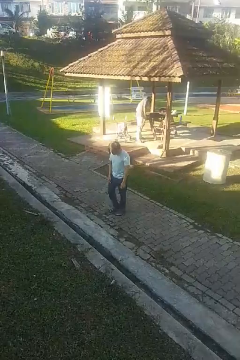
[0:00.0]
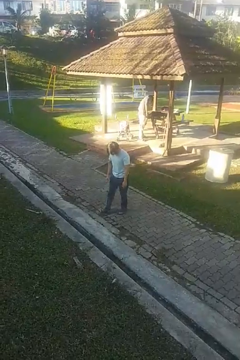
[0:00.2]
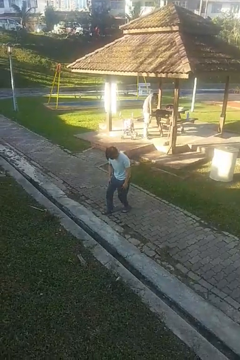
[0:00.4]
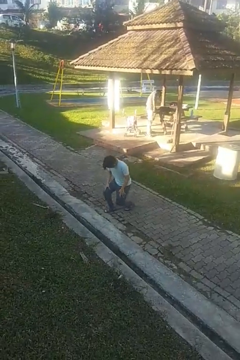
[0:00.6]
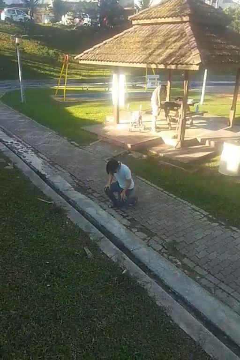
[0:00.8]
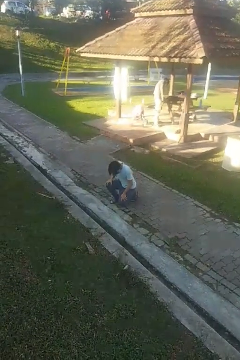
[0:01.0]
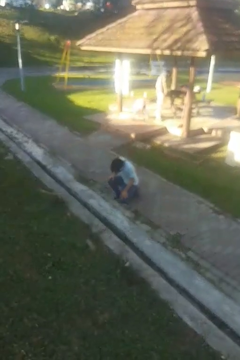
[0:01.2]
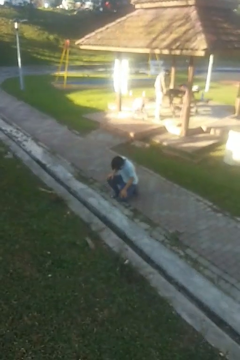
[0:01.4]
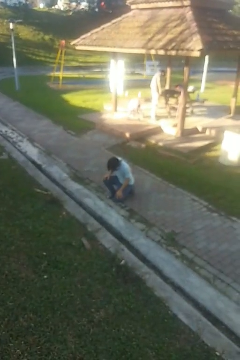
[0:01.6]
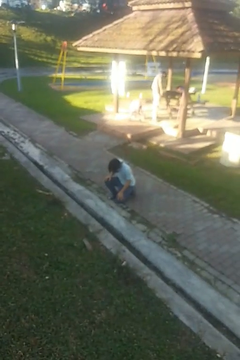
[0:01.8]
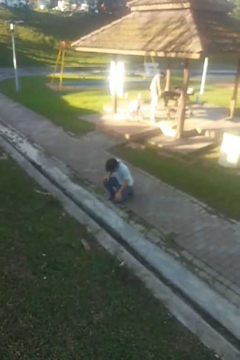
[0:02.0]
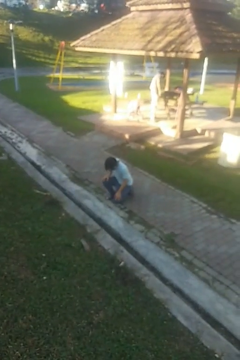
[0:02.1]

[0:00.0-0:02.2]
person kneels

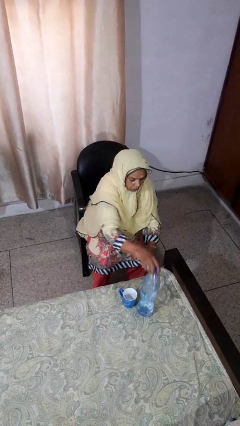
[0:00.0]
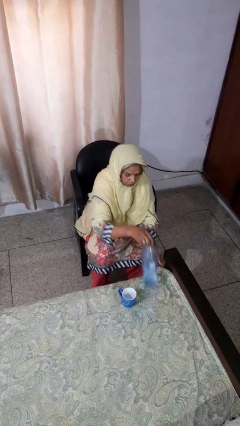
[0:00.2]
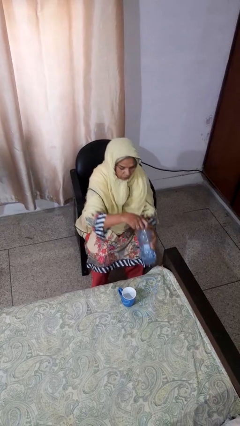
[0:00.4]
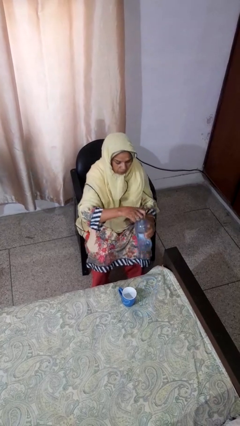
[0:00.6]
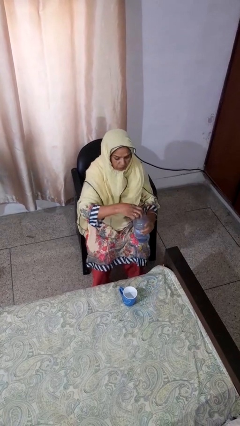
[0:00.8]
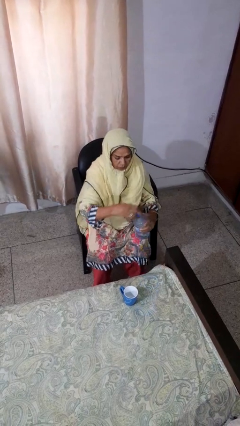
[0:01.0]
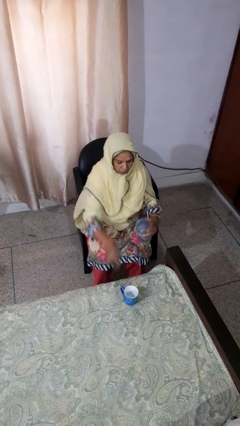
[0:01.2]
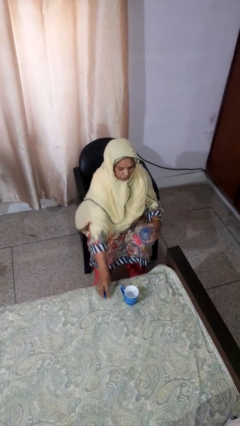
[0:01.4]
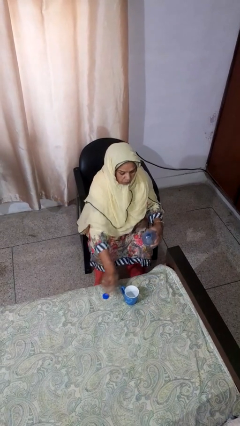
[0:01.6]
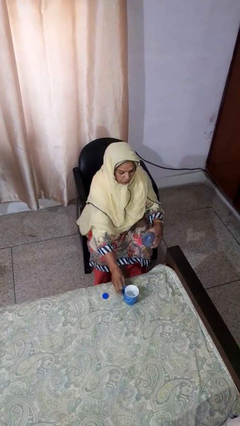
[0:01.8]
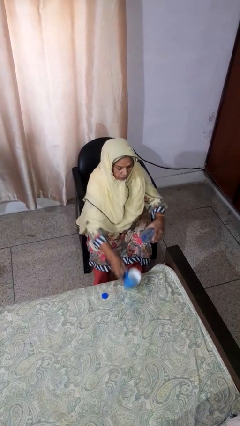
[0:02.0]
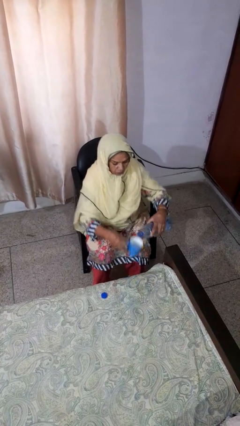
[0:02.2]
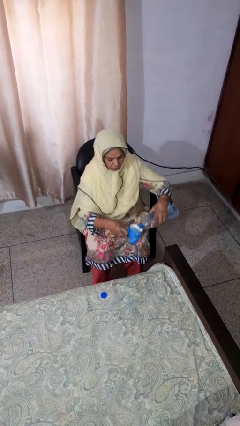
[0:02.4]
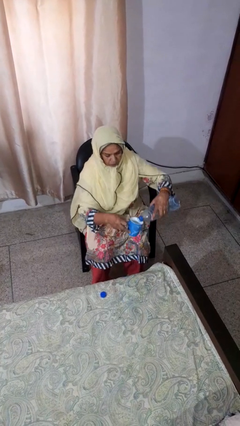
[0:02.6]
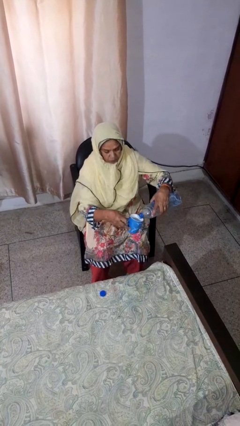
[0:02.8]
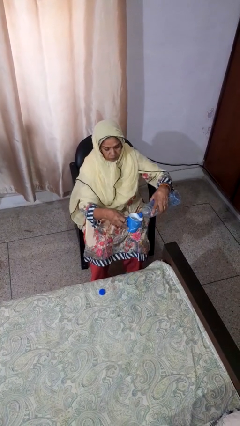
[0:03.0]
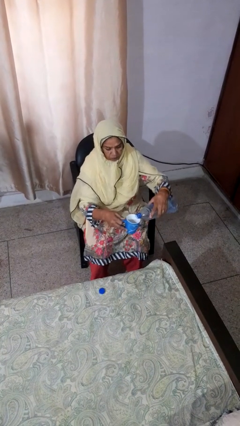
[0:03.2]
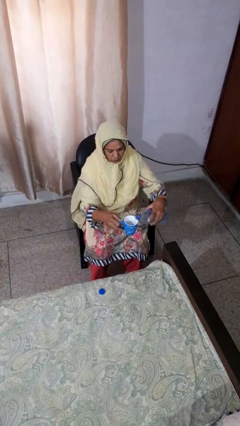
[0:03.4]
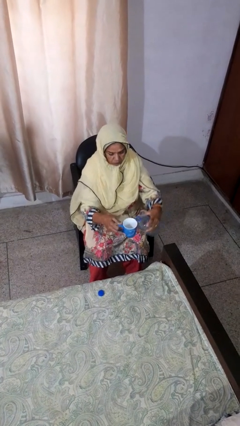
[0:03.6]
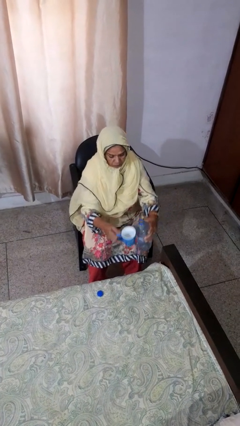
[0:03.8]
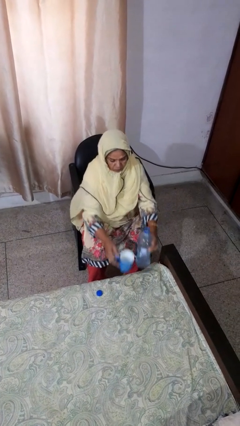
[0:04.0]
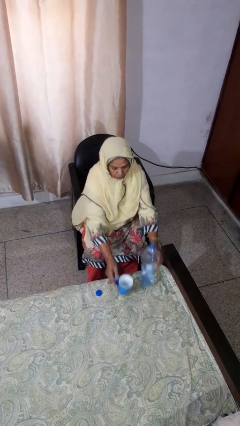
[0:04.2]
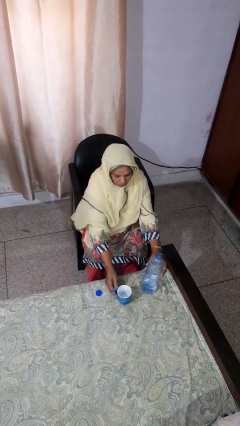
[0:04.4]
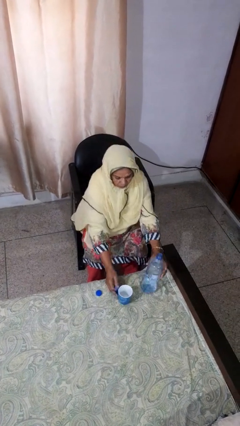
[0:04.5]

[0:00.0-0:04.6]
person pours liquid into cup

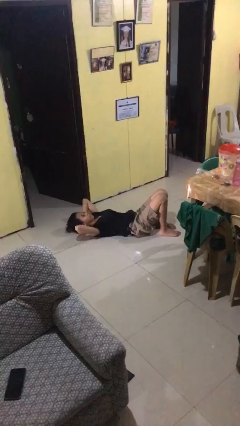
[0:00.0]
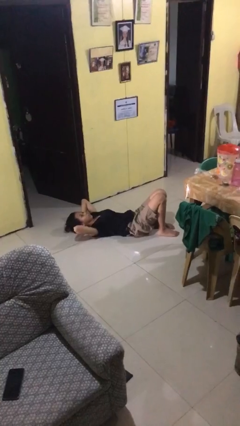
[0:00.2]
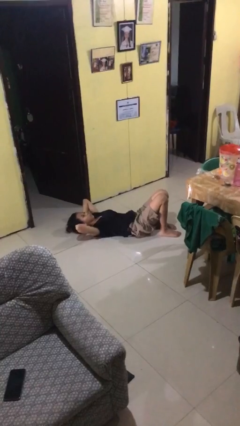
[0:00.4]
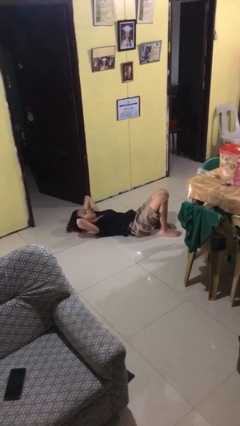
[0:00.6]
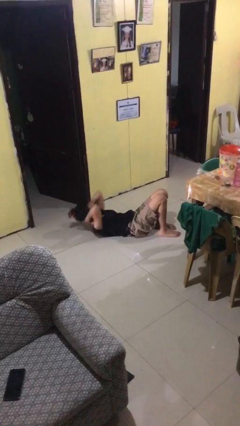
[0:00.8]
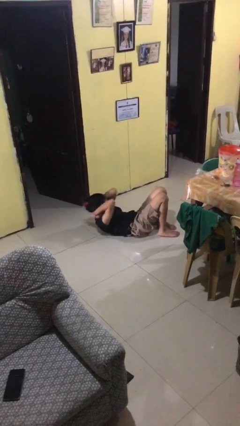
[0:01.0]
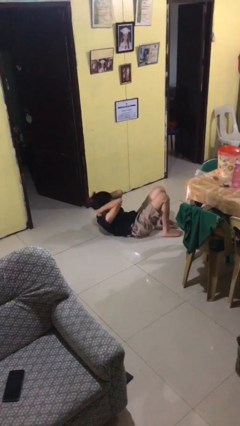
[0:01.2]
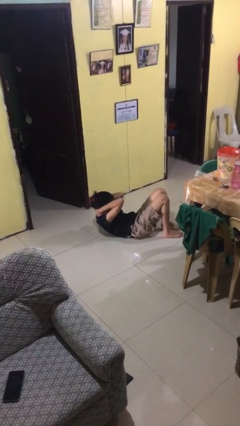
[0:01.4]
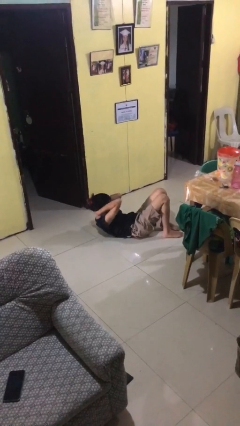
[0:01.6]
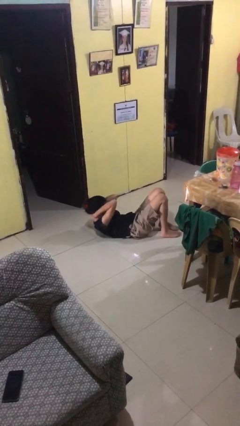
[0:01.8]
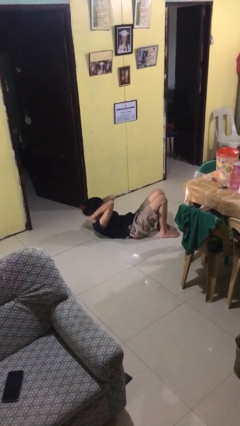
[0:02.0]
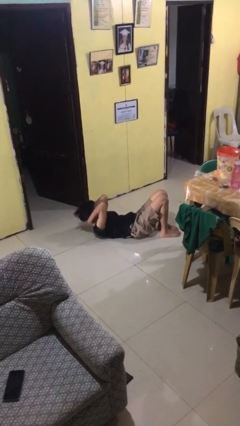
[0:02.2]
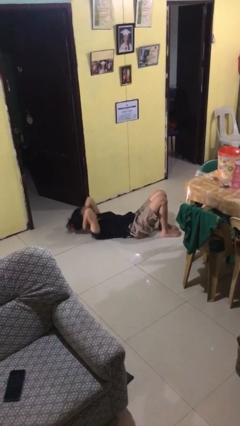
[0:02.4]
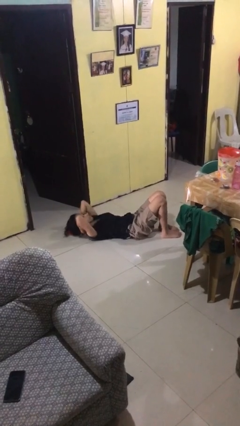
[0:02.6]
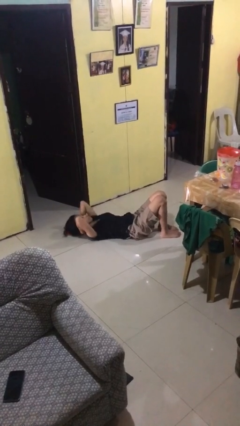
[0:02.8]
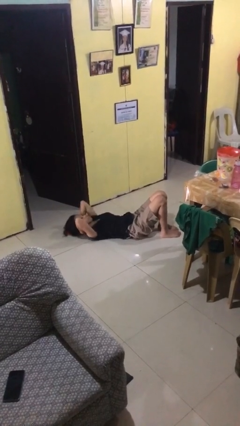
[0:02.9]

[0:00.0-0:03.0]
person exercises with situp

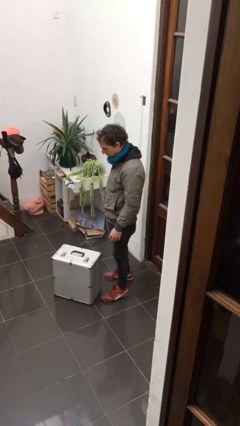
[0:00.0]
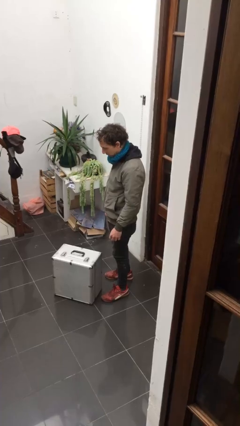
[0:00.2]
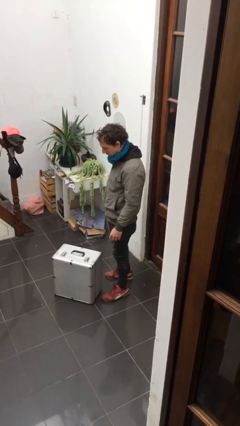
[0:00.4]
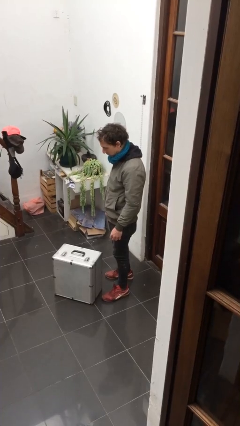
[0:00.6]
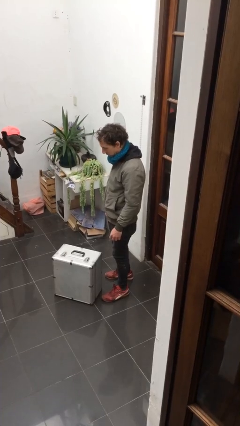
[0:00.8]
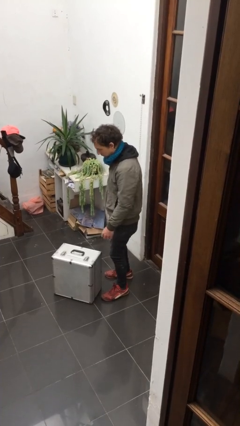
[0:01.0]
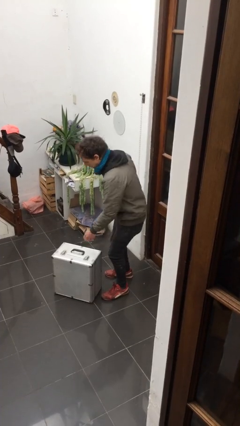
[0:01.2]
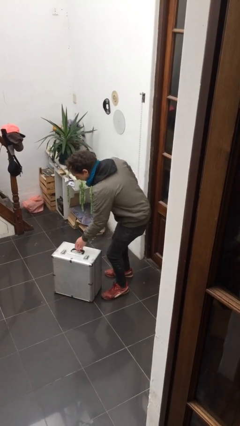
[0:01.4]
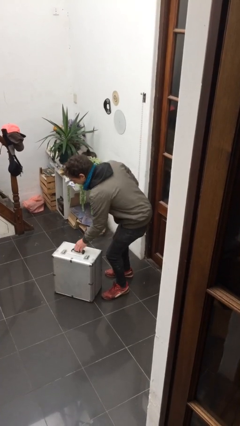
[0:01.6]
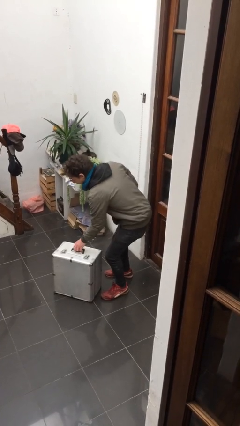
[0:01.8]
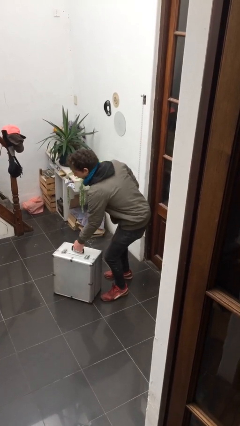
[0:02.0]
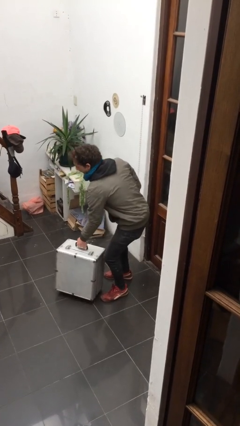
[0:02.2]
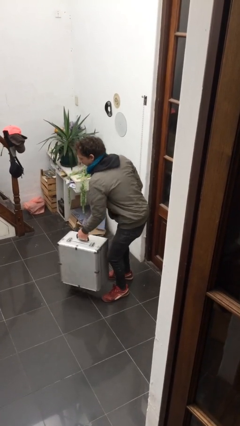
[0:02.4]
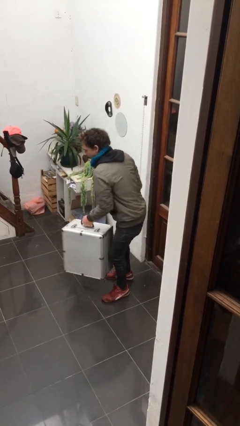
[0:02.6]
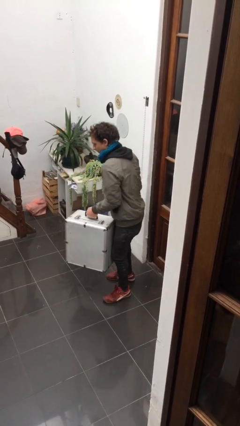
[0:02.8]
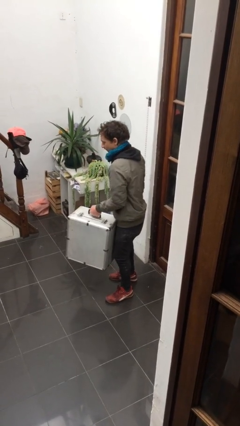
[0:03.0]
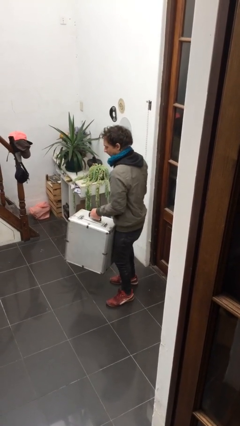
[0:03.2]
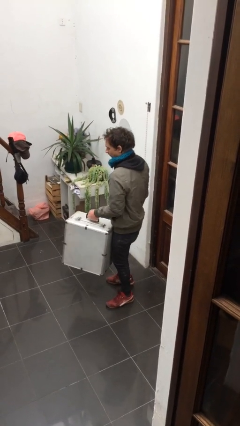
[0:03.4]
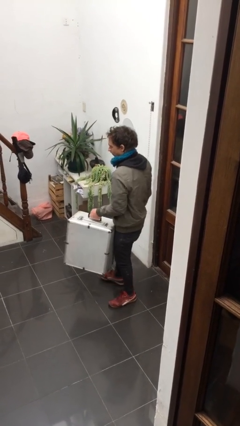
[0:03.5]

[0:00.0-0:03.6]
person picks up object from floor

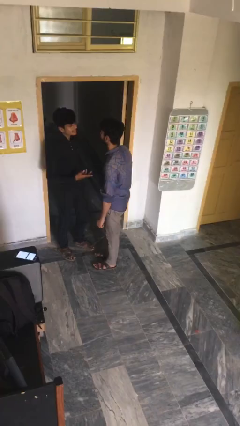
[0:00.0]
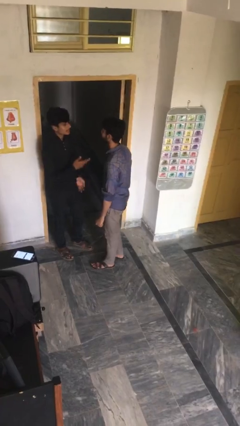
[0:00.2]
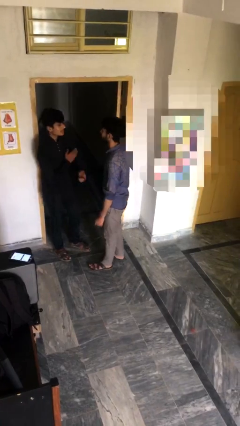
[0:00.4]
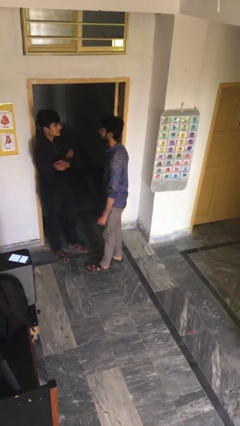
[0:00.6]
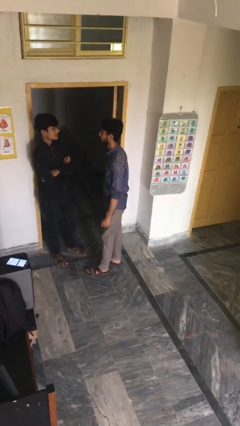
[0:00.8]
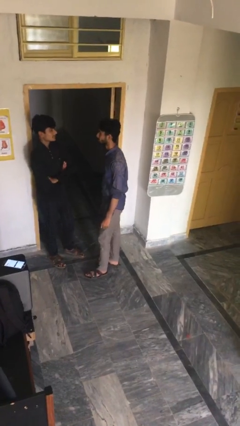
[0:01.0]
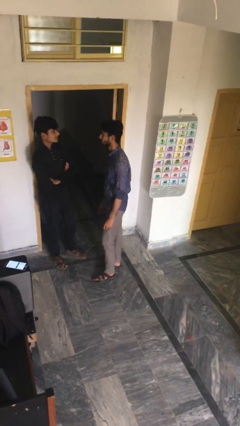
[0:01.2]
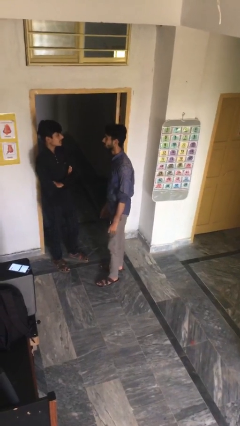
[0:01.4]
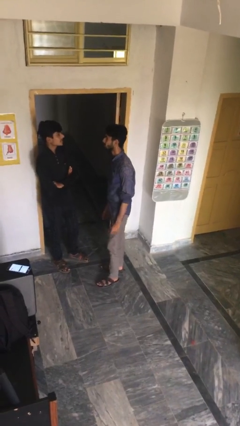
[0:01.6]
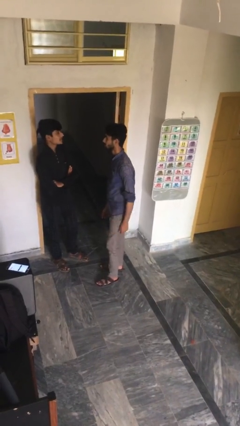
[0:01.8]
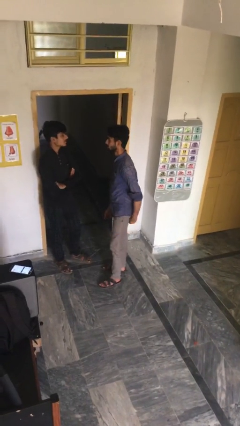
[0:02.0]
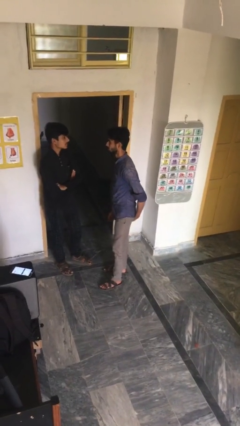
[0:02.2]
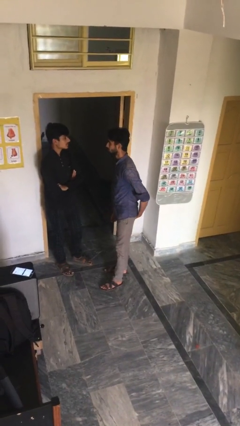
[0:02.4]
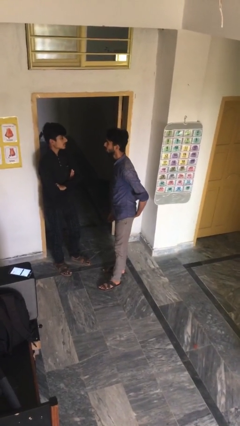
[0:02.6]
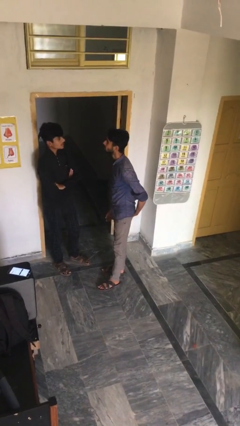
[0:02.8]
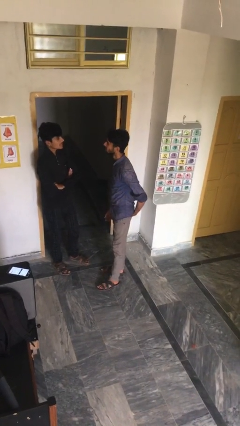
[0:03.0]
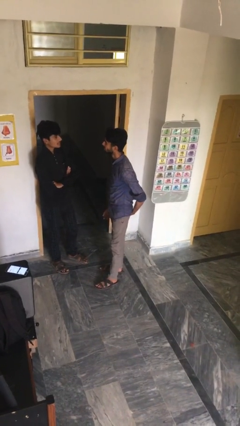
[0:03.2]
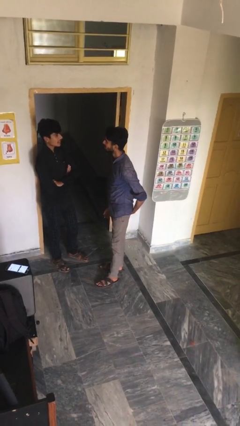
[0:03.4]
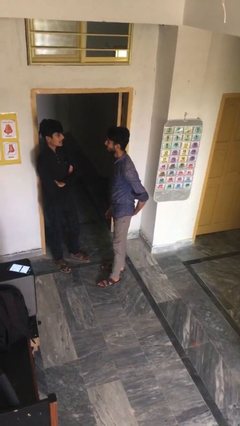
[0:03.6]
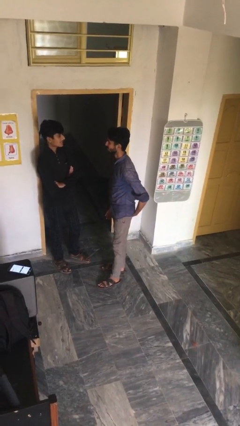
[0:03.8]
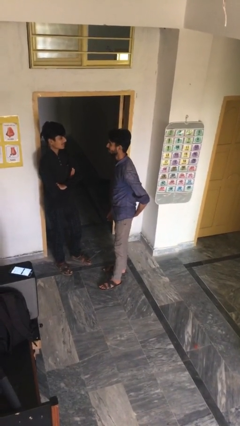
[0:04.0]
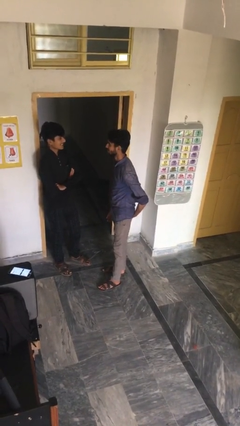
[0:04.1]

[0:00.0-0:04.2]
person talks to person

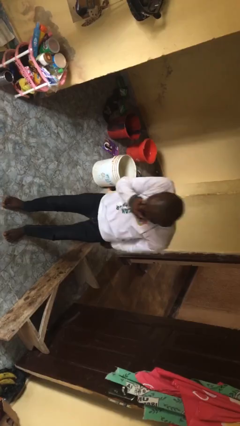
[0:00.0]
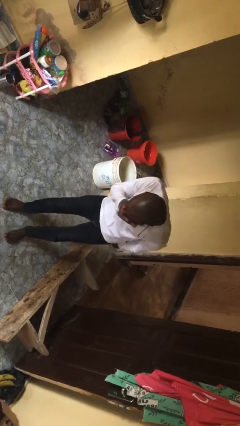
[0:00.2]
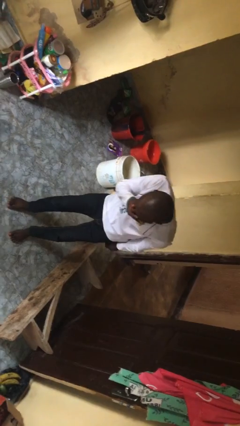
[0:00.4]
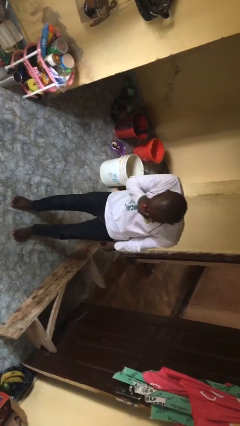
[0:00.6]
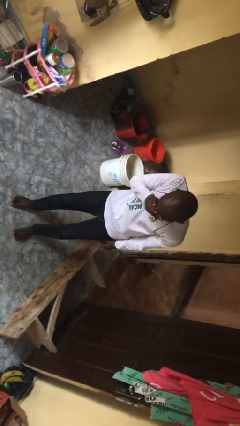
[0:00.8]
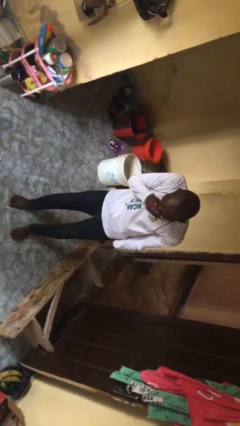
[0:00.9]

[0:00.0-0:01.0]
person sneezes into hand
